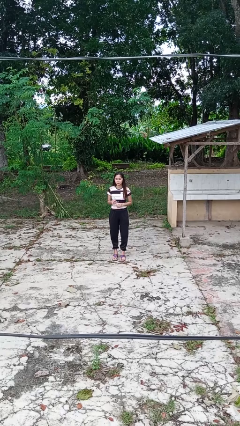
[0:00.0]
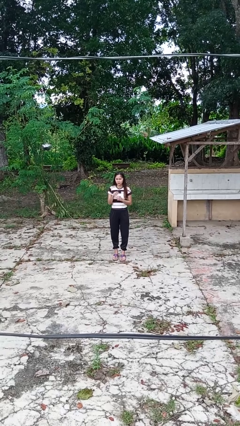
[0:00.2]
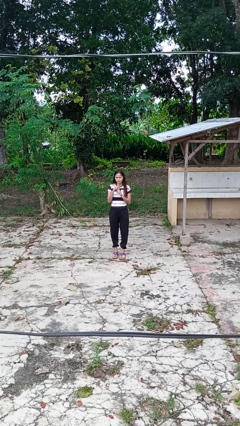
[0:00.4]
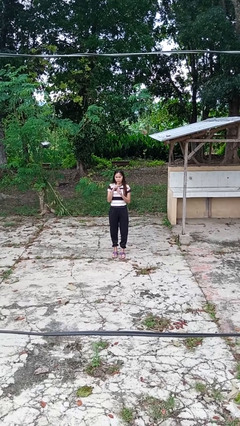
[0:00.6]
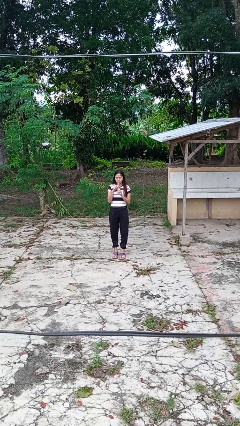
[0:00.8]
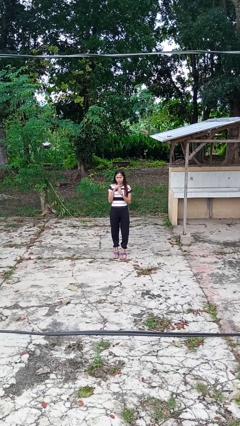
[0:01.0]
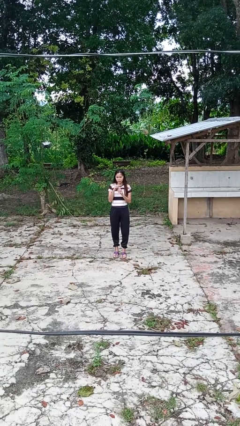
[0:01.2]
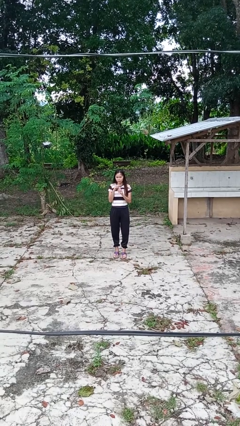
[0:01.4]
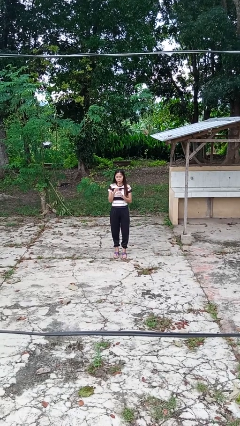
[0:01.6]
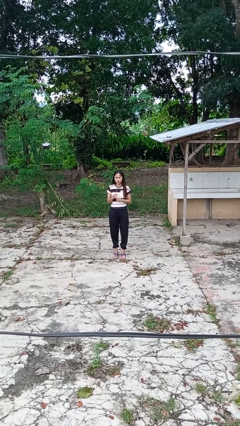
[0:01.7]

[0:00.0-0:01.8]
person drinks from straw

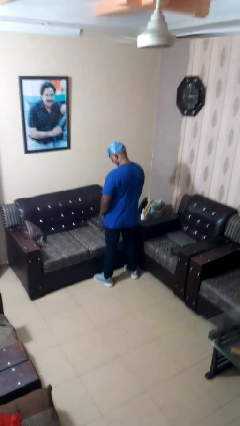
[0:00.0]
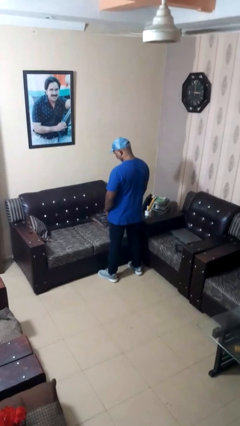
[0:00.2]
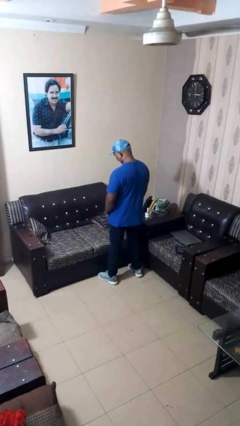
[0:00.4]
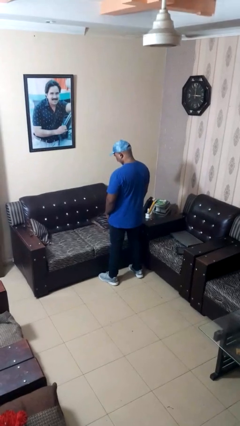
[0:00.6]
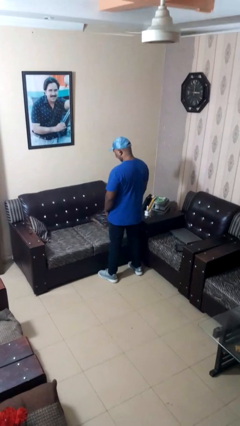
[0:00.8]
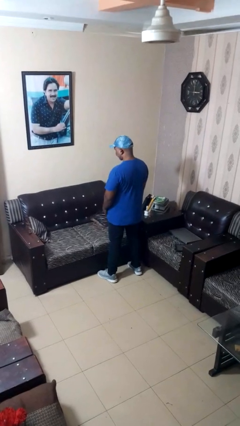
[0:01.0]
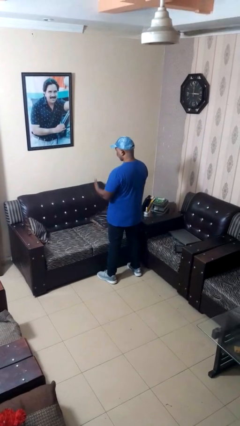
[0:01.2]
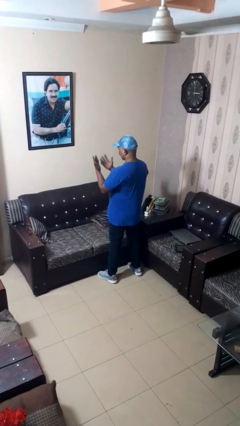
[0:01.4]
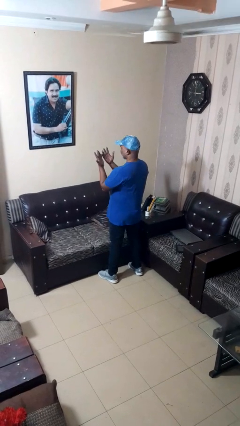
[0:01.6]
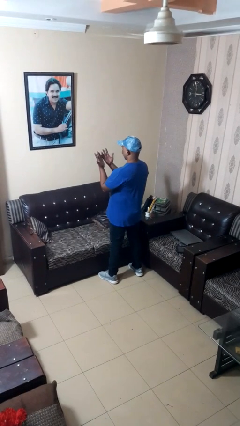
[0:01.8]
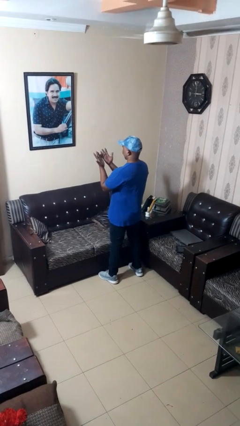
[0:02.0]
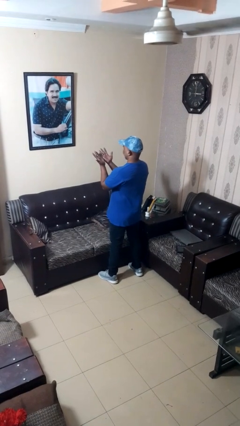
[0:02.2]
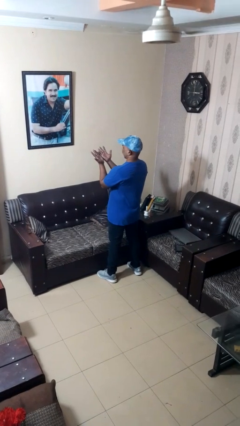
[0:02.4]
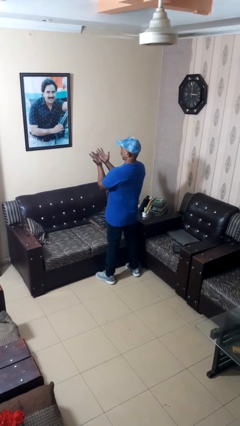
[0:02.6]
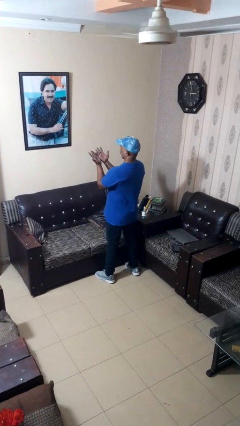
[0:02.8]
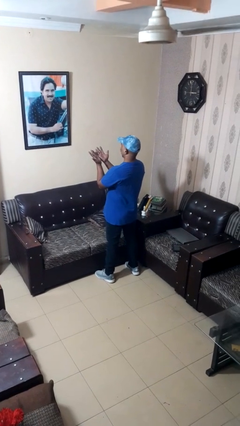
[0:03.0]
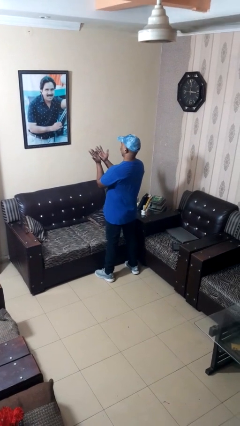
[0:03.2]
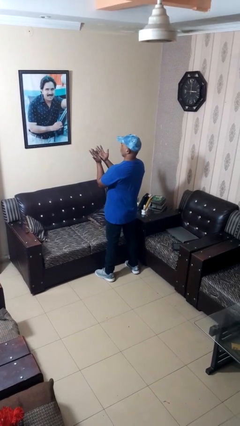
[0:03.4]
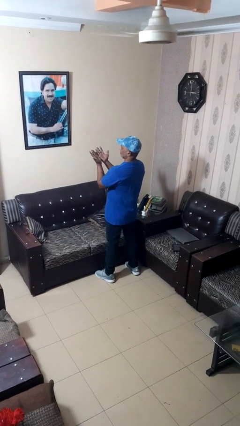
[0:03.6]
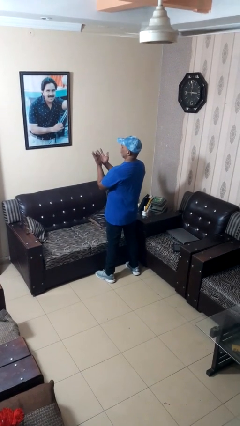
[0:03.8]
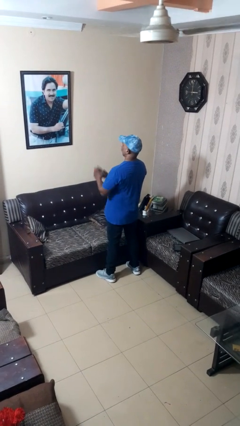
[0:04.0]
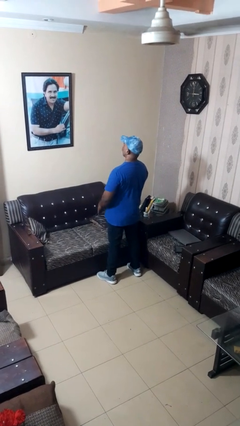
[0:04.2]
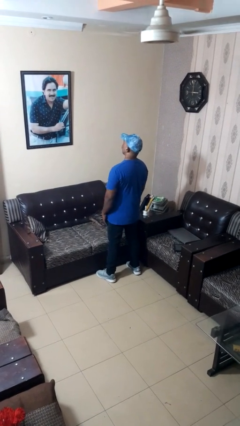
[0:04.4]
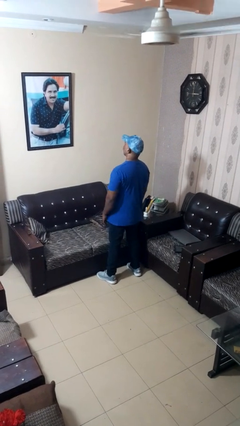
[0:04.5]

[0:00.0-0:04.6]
person looks at hands in lap

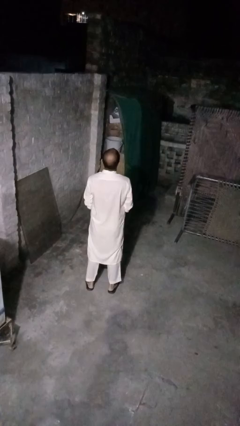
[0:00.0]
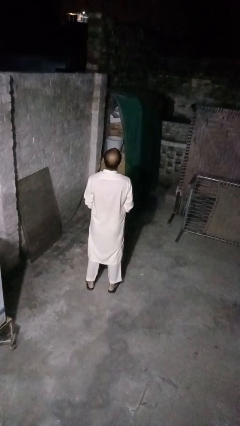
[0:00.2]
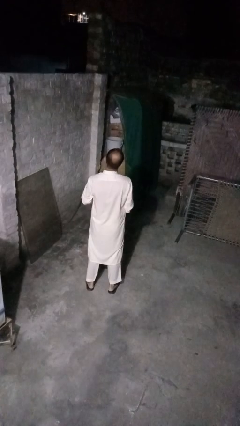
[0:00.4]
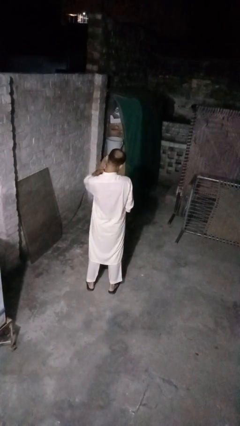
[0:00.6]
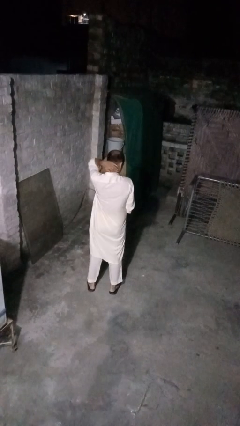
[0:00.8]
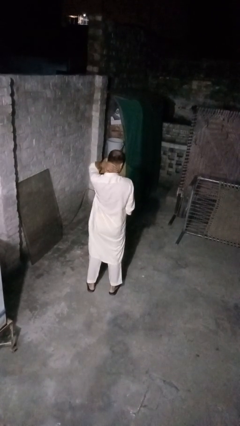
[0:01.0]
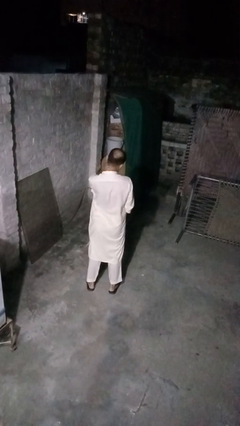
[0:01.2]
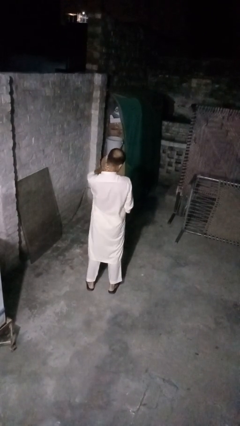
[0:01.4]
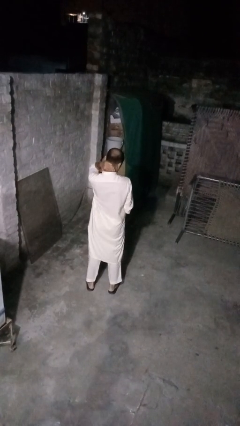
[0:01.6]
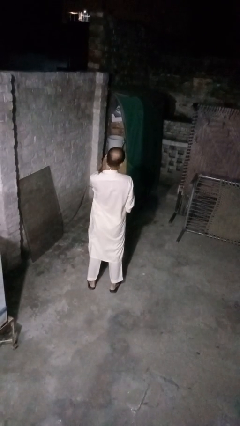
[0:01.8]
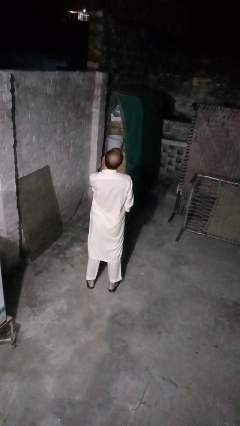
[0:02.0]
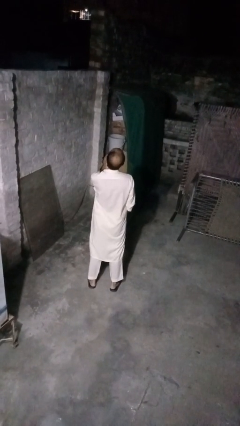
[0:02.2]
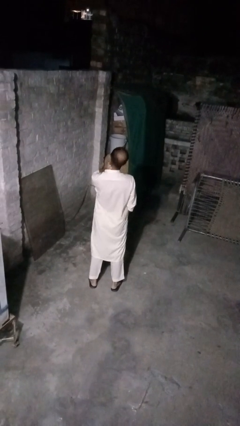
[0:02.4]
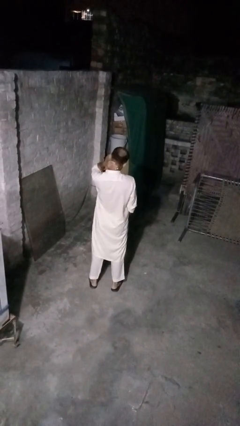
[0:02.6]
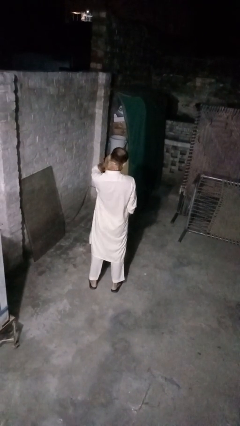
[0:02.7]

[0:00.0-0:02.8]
person rubs neck

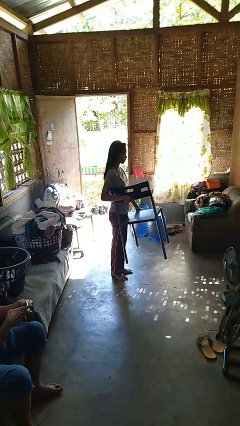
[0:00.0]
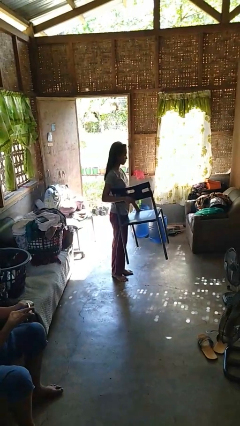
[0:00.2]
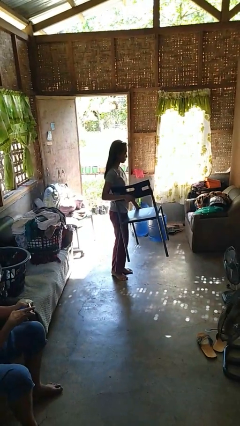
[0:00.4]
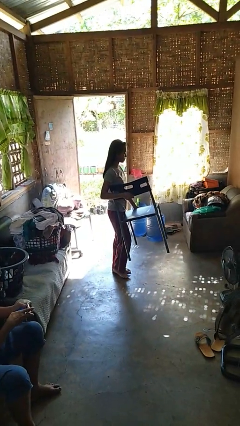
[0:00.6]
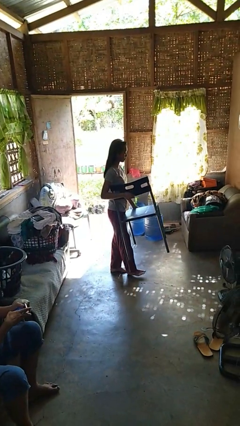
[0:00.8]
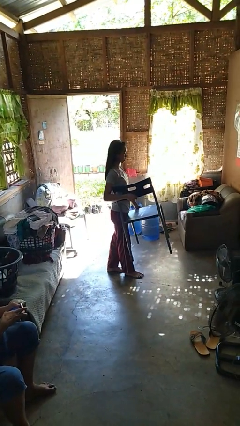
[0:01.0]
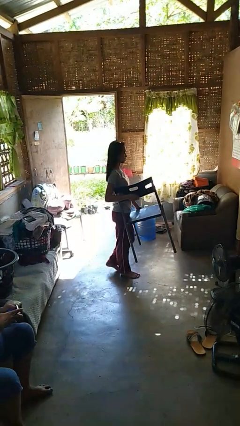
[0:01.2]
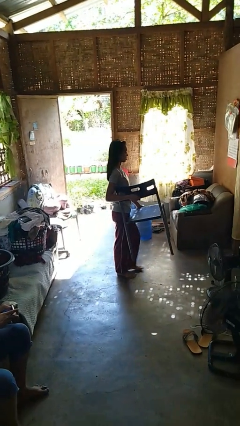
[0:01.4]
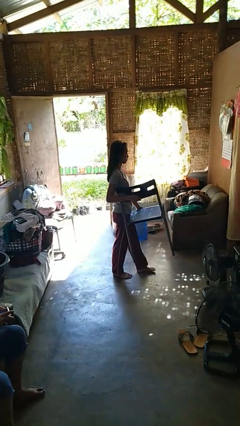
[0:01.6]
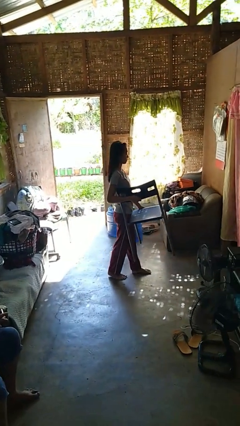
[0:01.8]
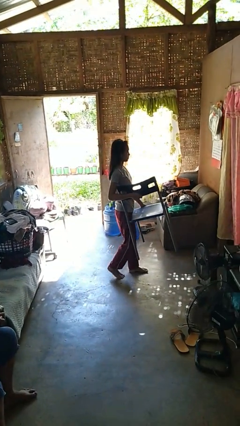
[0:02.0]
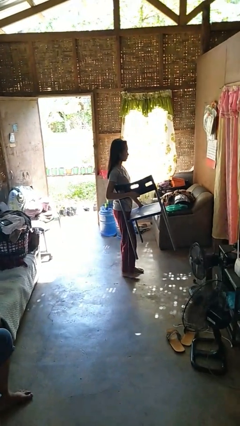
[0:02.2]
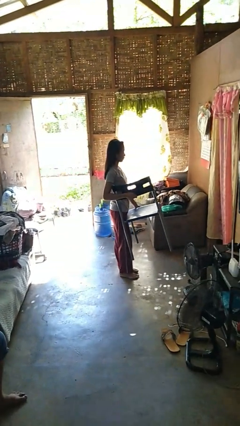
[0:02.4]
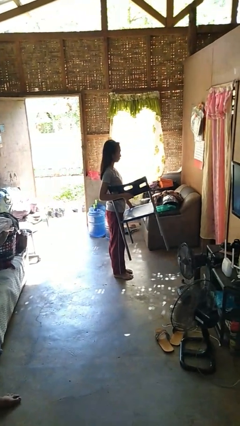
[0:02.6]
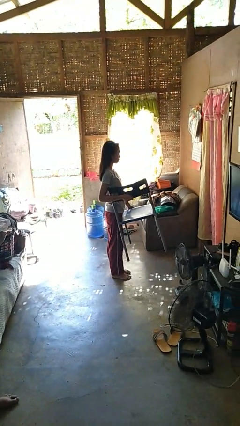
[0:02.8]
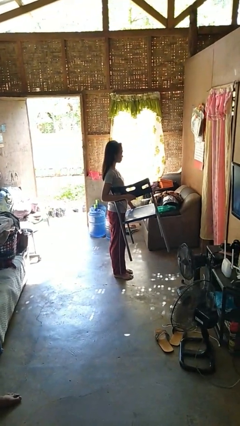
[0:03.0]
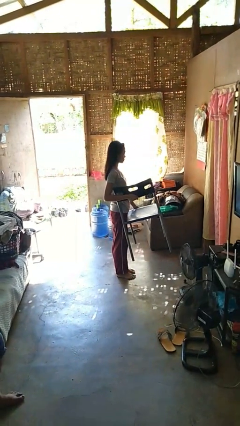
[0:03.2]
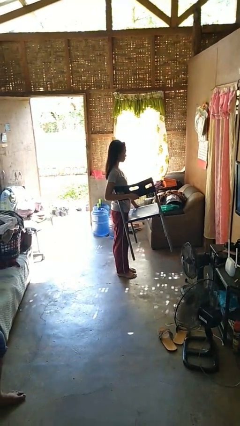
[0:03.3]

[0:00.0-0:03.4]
person carries furniture

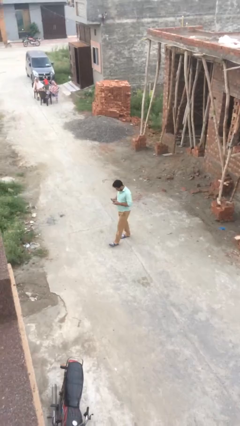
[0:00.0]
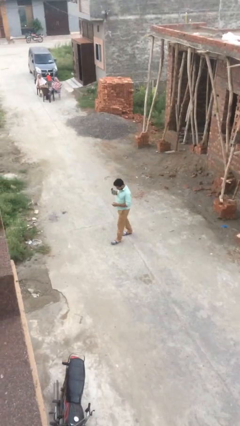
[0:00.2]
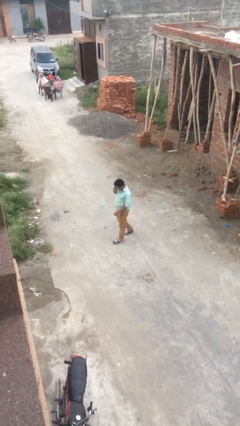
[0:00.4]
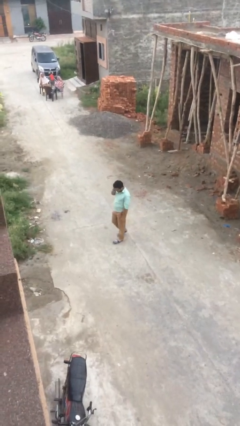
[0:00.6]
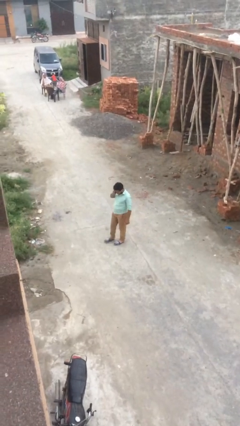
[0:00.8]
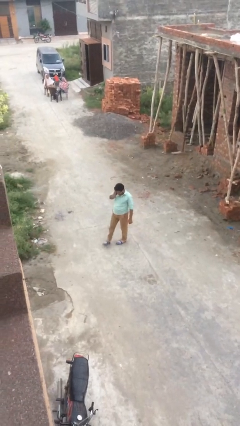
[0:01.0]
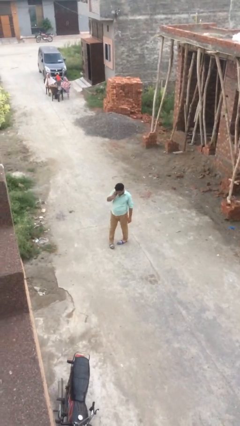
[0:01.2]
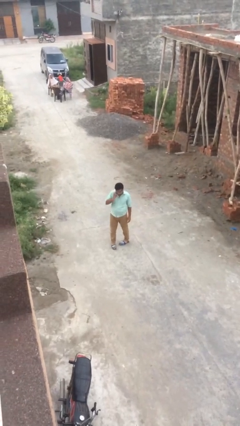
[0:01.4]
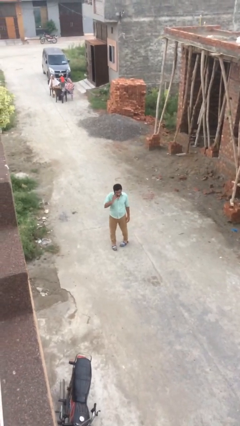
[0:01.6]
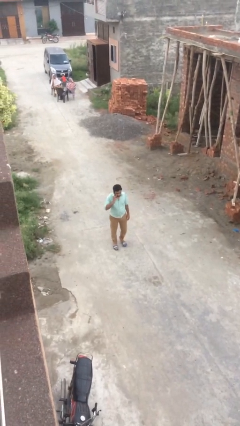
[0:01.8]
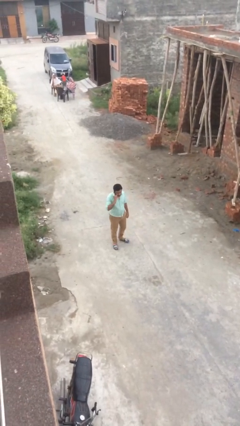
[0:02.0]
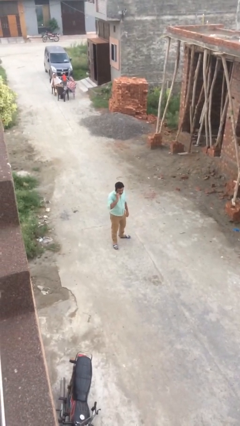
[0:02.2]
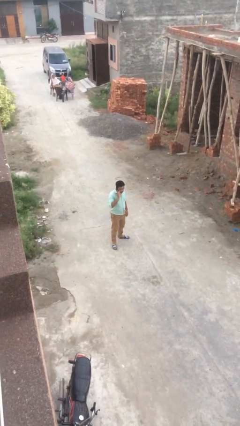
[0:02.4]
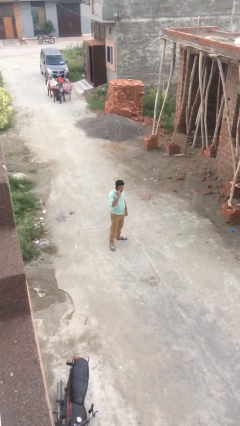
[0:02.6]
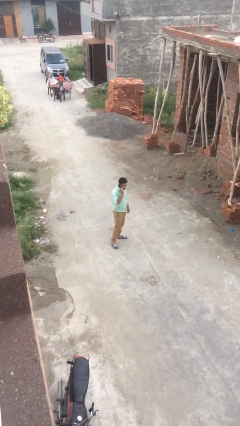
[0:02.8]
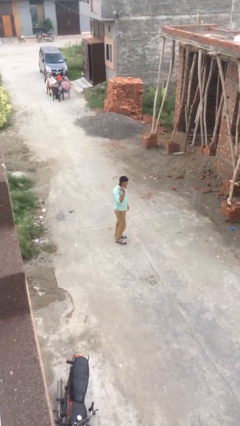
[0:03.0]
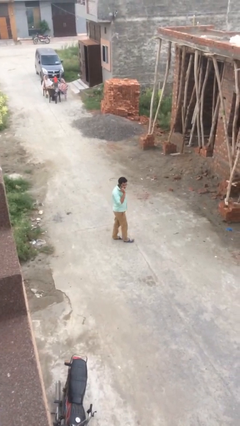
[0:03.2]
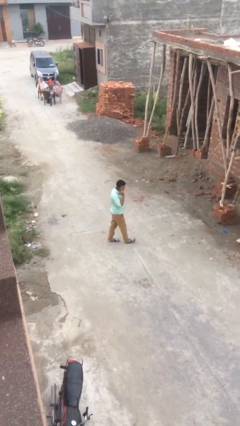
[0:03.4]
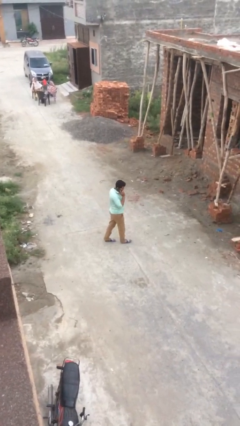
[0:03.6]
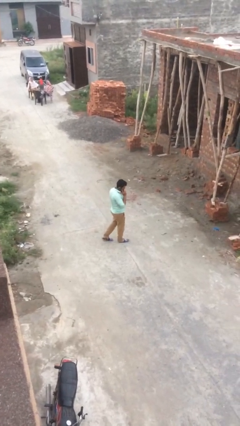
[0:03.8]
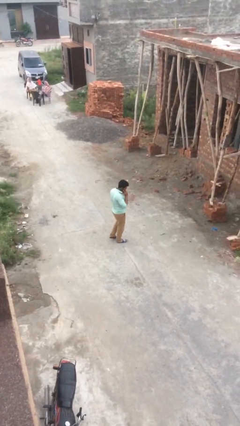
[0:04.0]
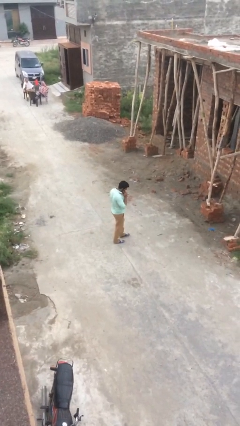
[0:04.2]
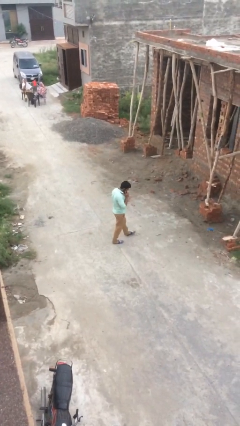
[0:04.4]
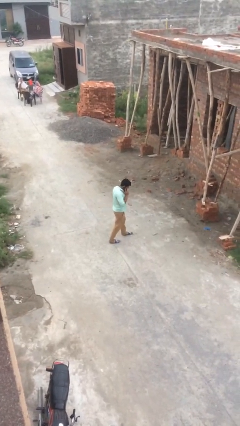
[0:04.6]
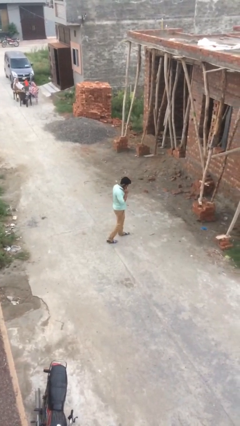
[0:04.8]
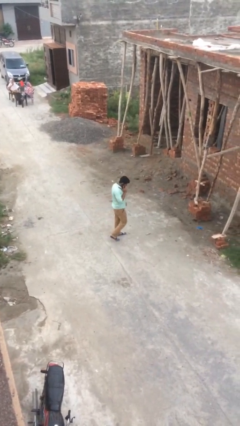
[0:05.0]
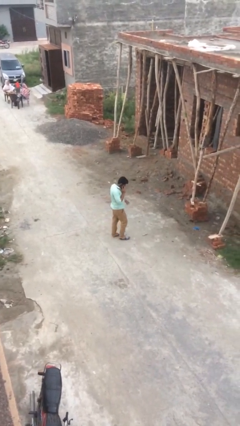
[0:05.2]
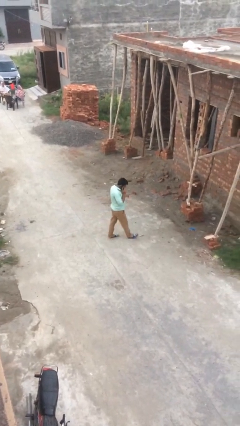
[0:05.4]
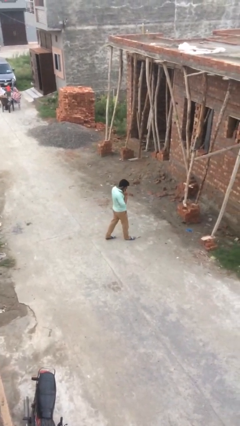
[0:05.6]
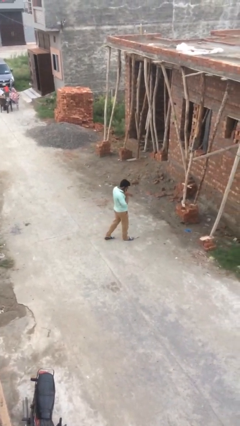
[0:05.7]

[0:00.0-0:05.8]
person talks on phone
